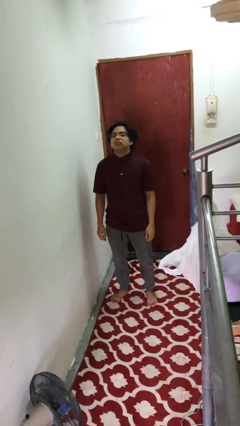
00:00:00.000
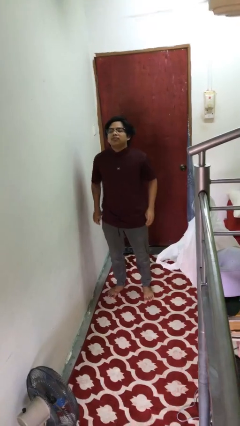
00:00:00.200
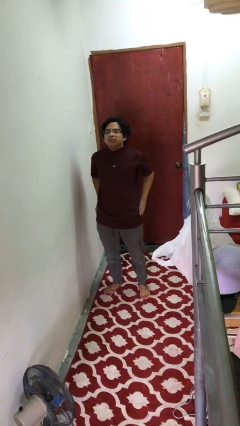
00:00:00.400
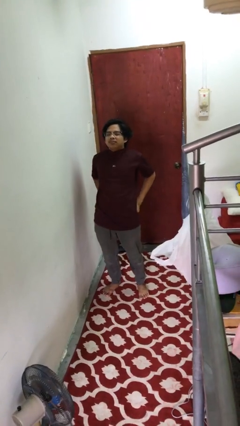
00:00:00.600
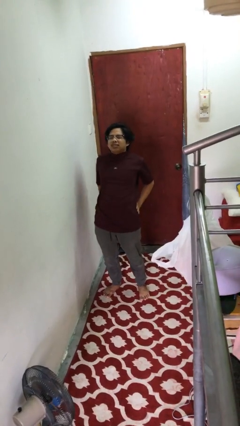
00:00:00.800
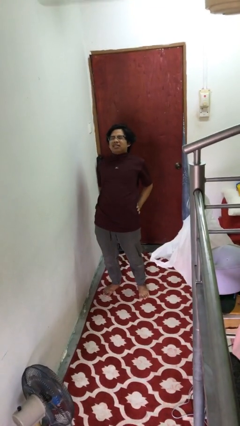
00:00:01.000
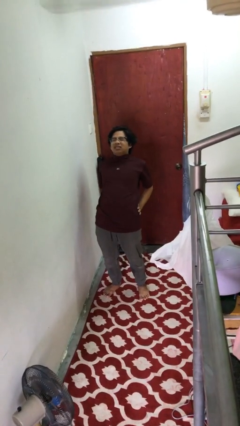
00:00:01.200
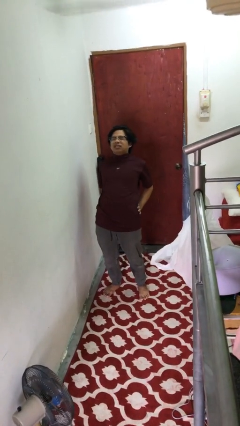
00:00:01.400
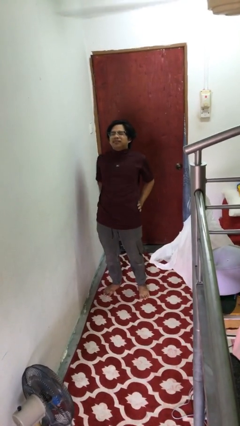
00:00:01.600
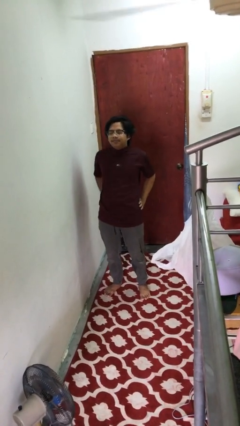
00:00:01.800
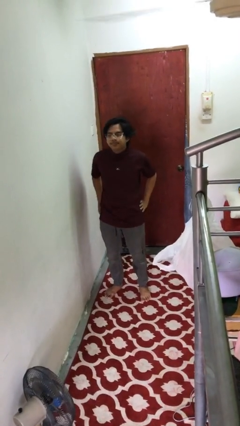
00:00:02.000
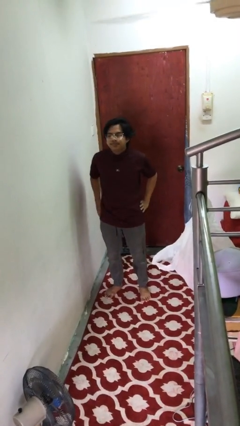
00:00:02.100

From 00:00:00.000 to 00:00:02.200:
person stretches back

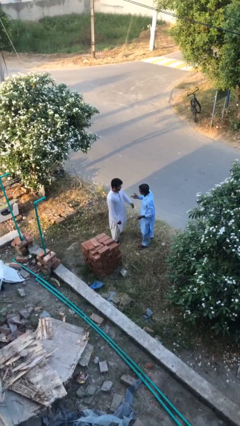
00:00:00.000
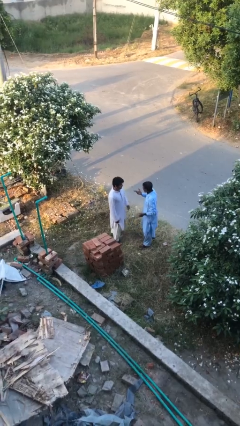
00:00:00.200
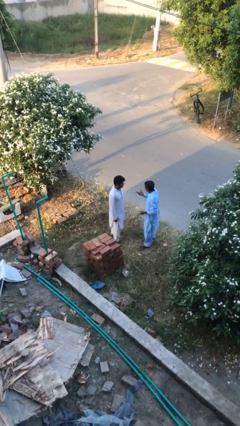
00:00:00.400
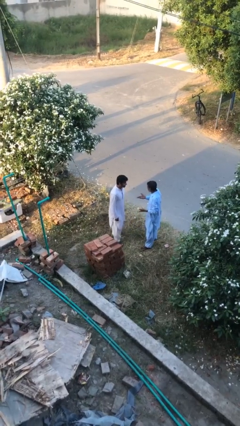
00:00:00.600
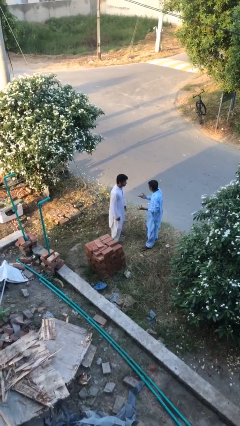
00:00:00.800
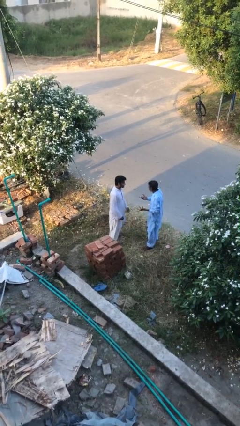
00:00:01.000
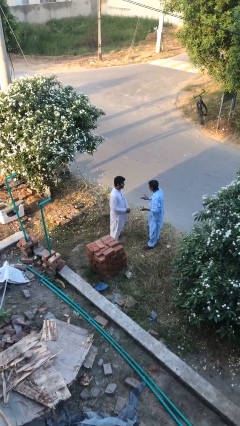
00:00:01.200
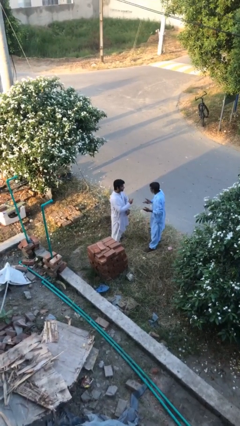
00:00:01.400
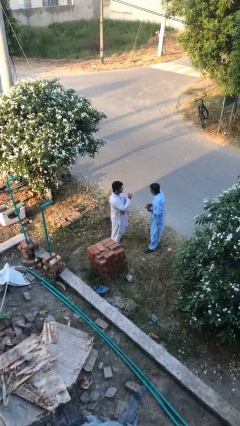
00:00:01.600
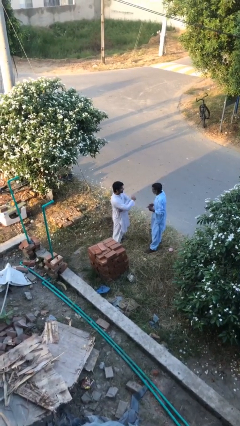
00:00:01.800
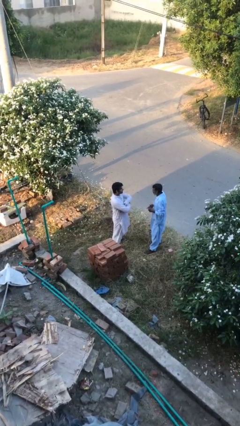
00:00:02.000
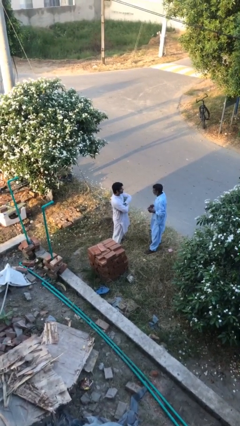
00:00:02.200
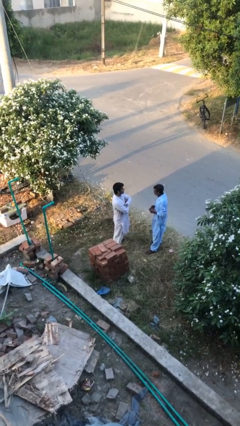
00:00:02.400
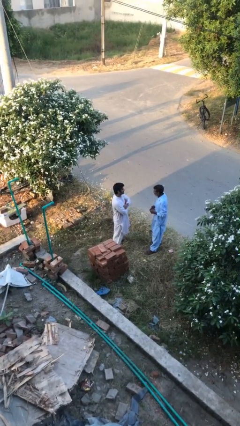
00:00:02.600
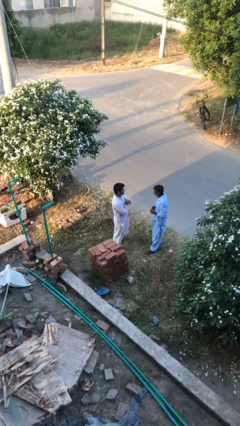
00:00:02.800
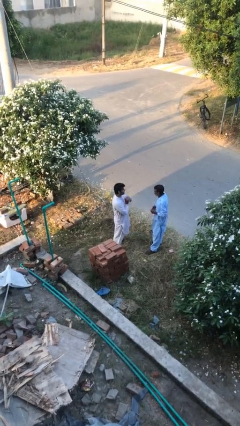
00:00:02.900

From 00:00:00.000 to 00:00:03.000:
person talks to person

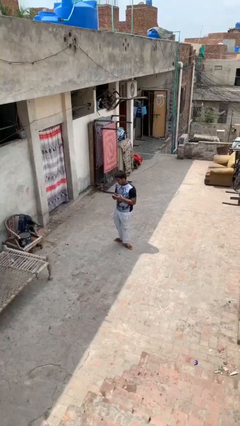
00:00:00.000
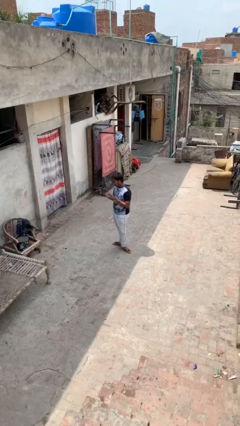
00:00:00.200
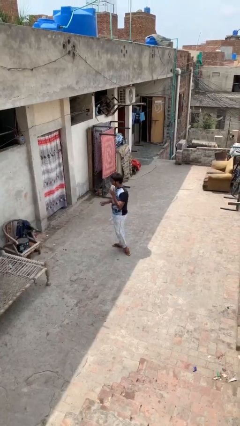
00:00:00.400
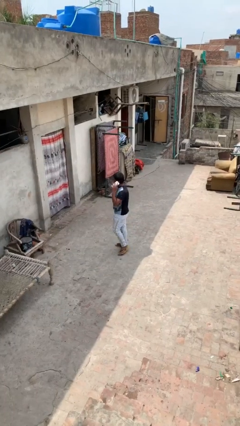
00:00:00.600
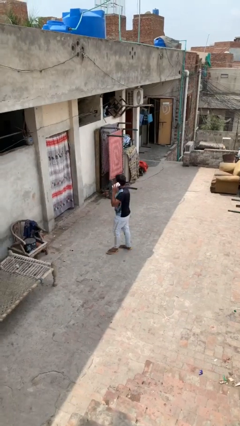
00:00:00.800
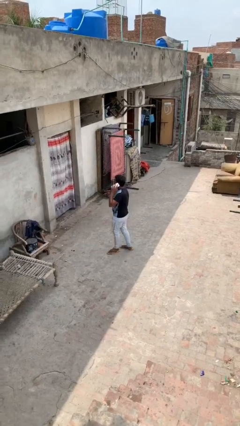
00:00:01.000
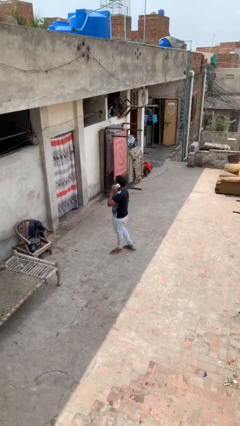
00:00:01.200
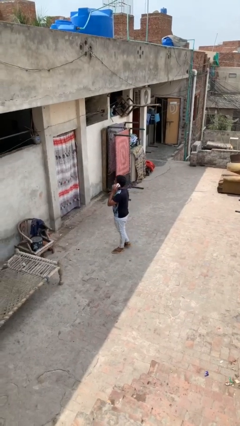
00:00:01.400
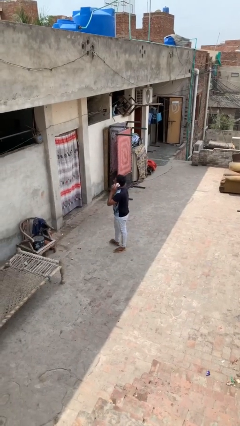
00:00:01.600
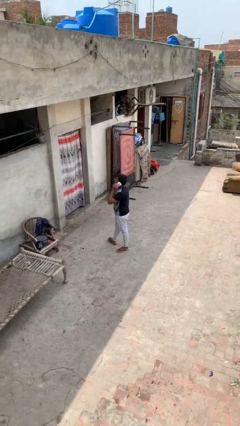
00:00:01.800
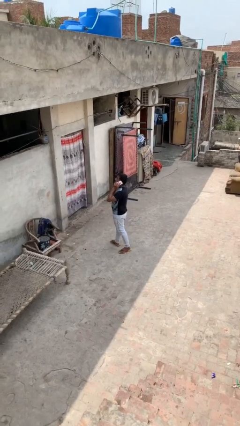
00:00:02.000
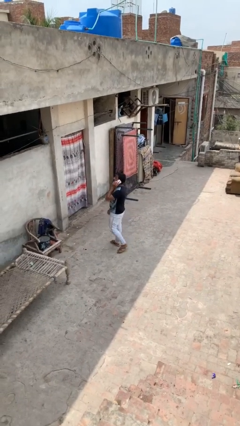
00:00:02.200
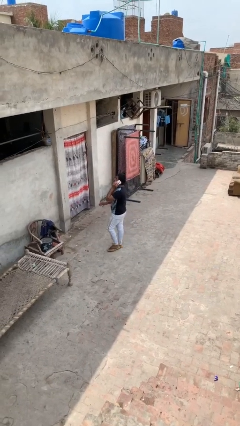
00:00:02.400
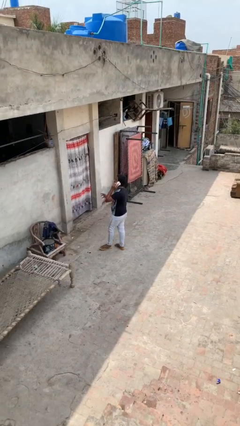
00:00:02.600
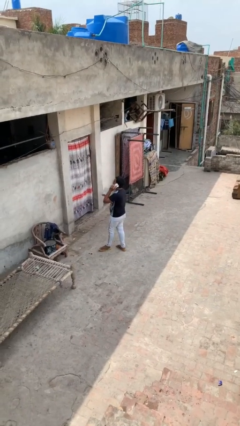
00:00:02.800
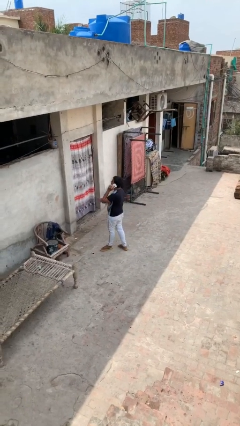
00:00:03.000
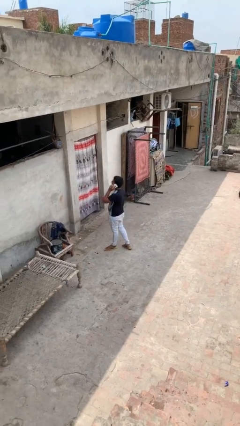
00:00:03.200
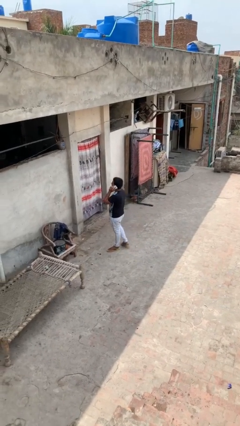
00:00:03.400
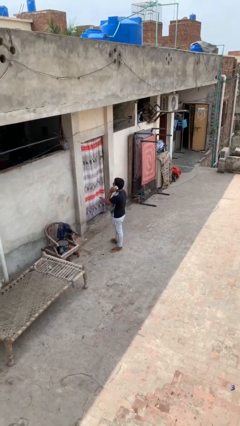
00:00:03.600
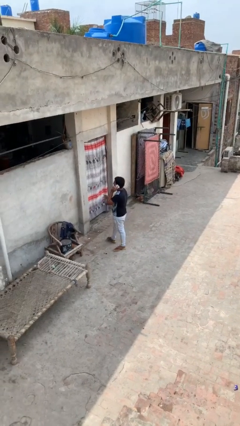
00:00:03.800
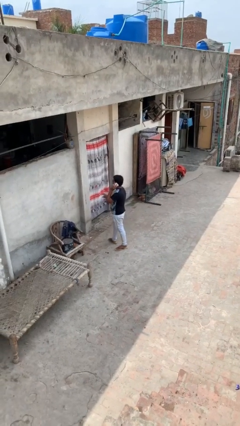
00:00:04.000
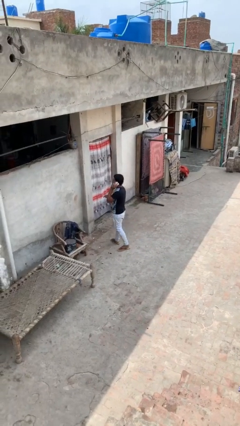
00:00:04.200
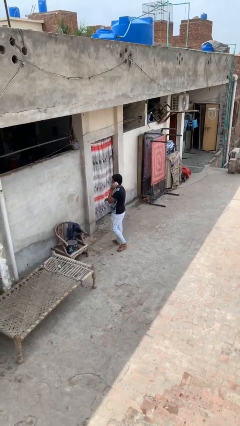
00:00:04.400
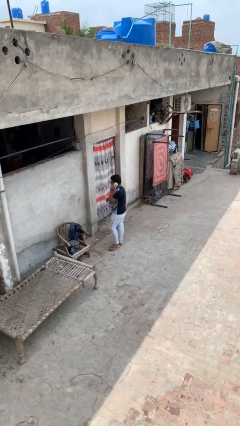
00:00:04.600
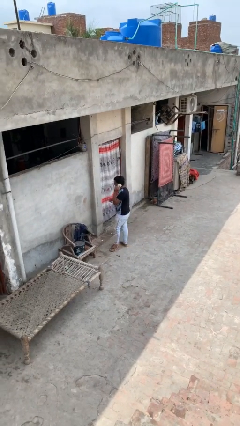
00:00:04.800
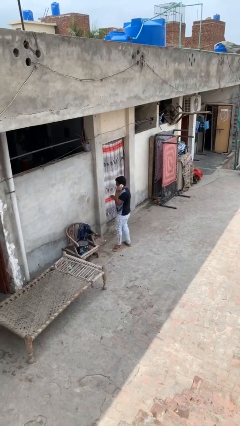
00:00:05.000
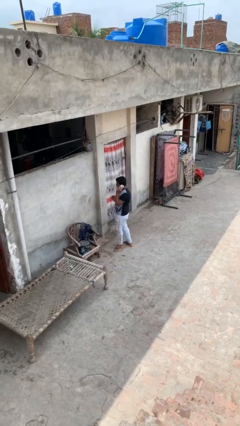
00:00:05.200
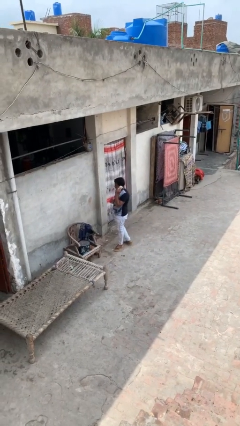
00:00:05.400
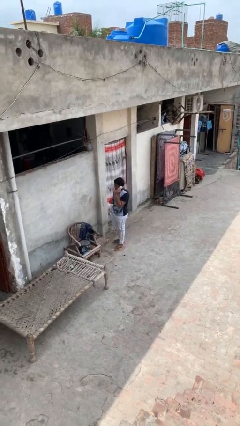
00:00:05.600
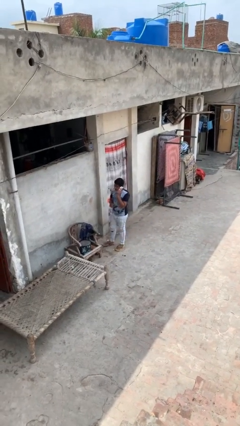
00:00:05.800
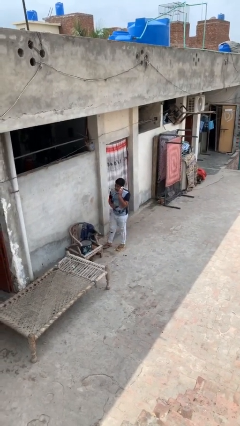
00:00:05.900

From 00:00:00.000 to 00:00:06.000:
person talks on phone

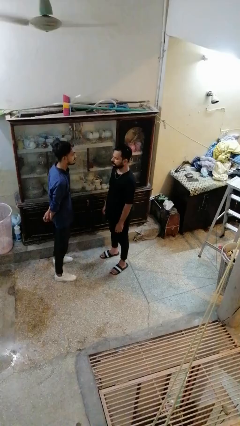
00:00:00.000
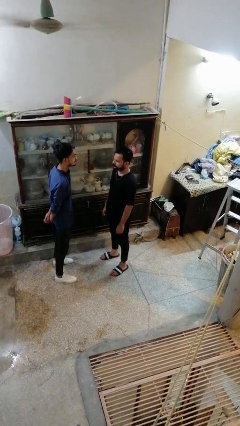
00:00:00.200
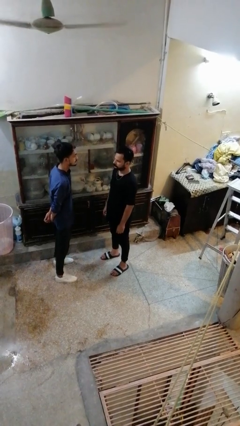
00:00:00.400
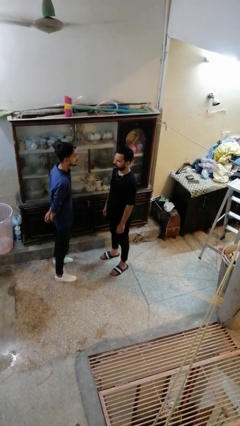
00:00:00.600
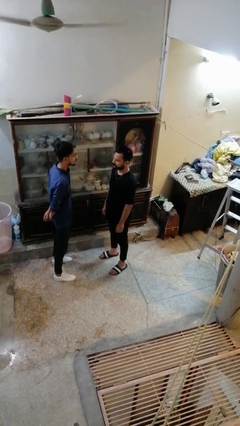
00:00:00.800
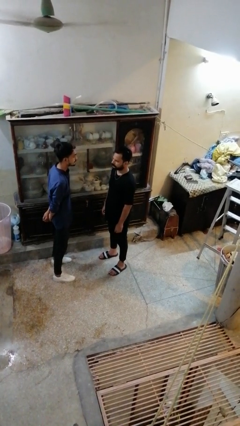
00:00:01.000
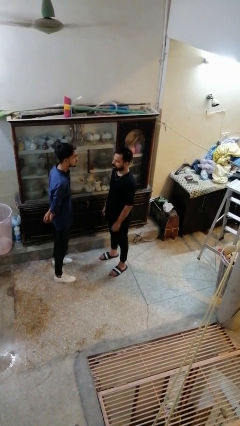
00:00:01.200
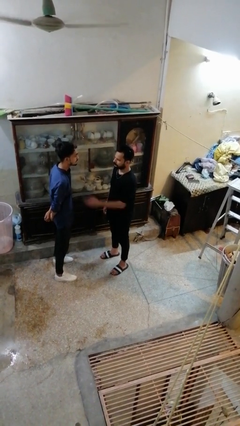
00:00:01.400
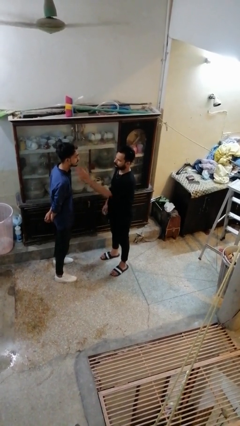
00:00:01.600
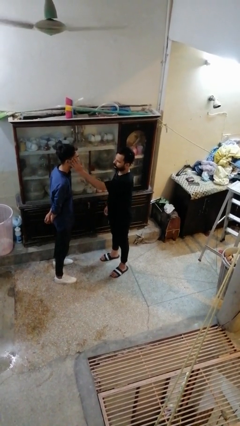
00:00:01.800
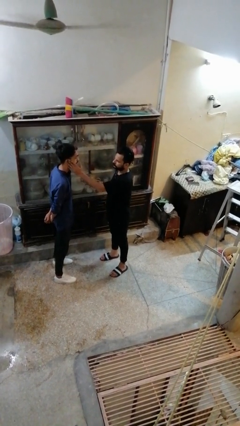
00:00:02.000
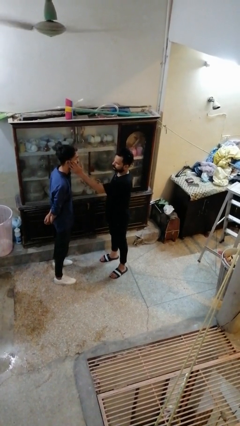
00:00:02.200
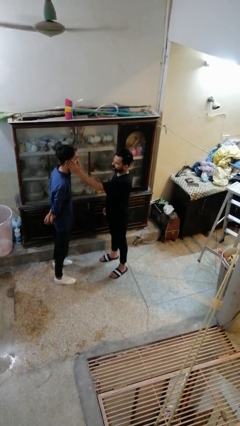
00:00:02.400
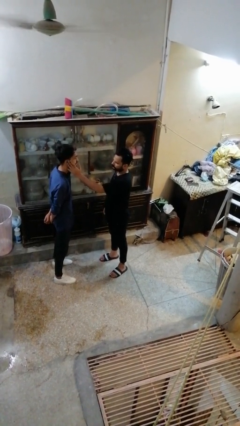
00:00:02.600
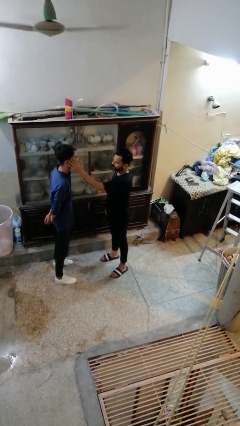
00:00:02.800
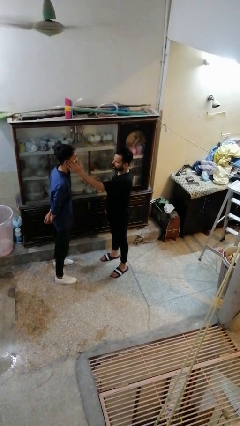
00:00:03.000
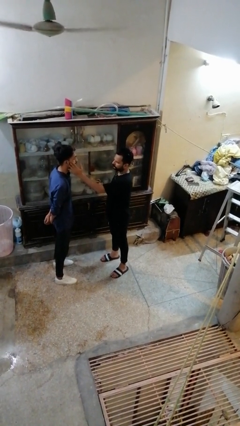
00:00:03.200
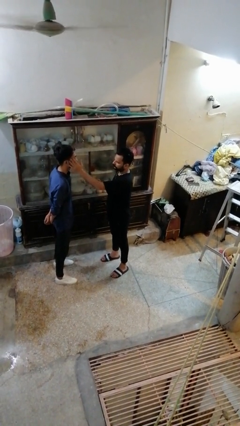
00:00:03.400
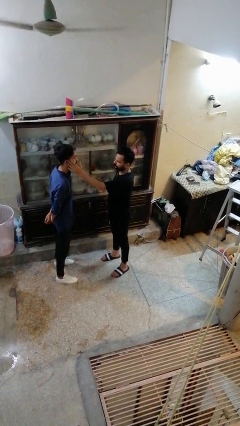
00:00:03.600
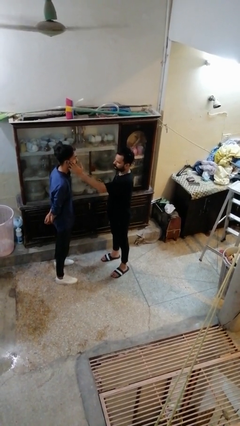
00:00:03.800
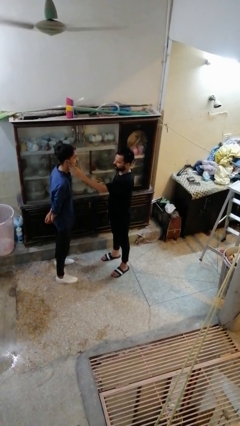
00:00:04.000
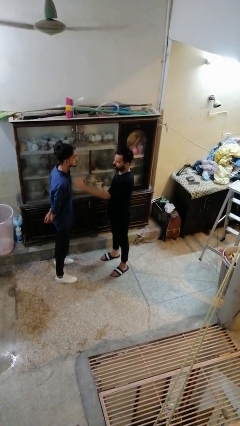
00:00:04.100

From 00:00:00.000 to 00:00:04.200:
person touches face of person

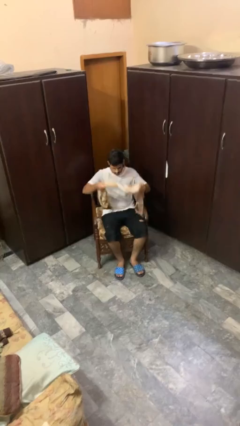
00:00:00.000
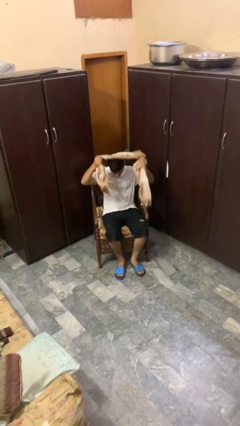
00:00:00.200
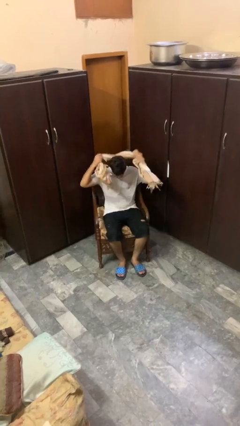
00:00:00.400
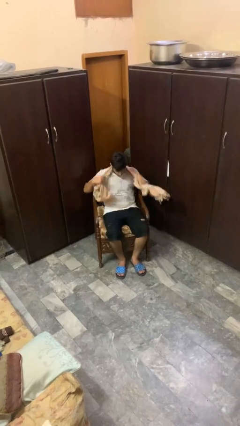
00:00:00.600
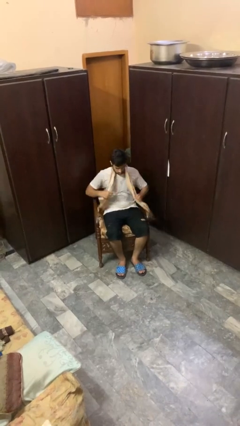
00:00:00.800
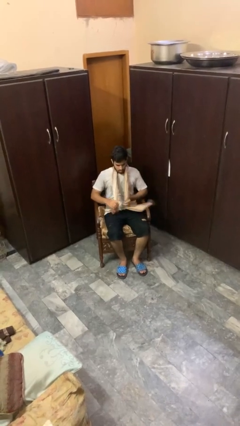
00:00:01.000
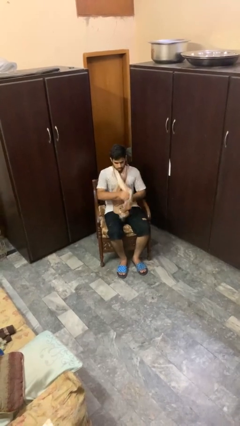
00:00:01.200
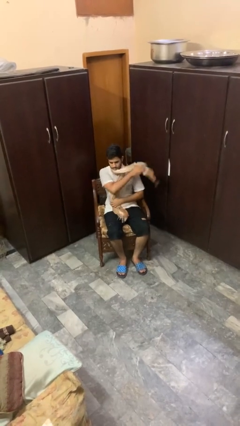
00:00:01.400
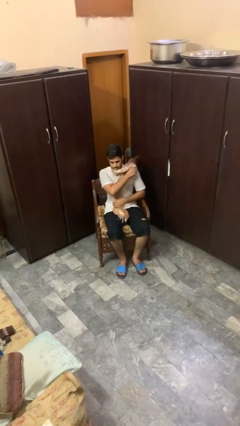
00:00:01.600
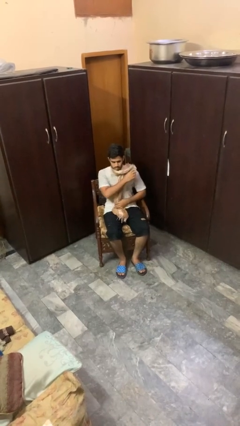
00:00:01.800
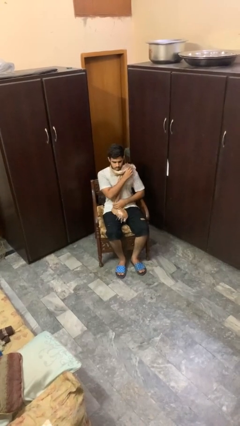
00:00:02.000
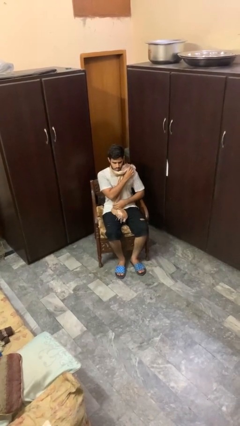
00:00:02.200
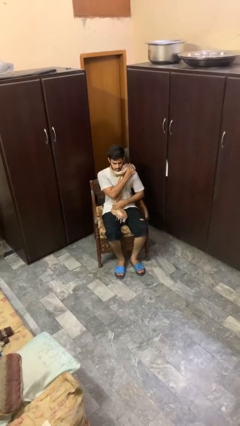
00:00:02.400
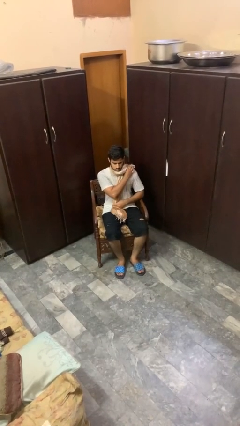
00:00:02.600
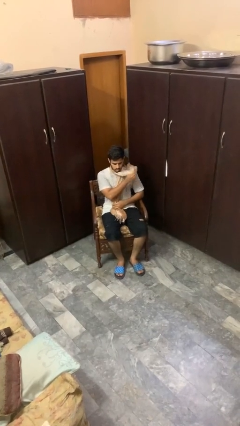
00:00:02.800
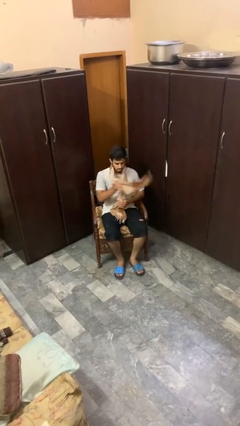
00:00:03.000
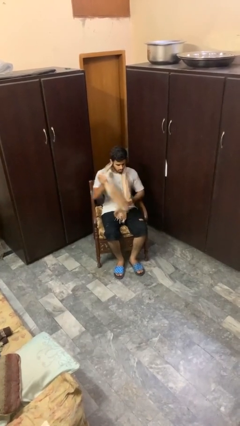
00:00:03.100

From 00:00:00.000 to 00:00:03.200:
person puts on scarf
